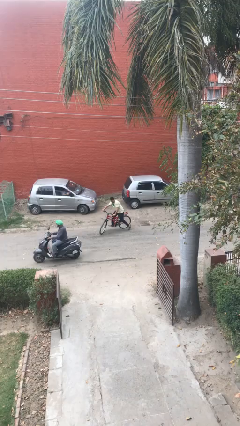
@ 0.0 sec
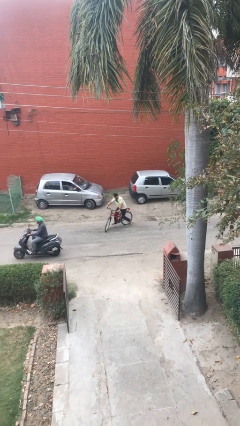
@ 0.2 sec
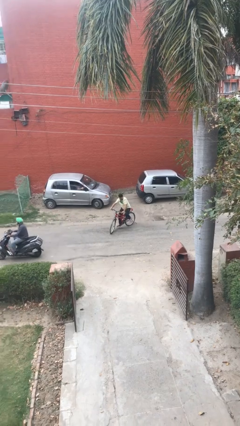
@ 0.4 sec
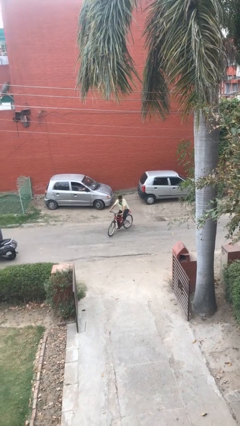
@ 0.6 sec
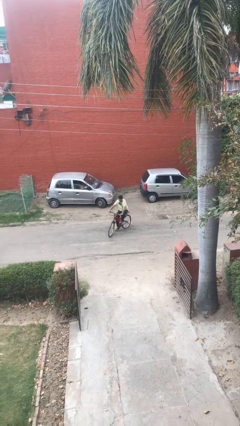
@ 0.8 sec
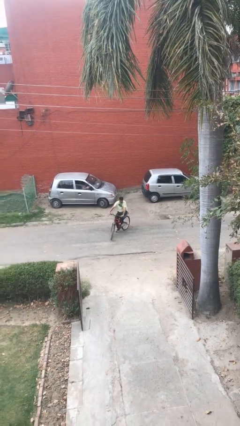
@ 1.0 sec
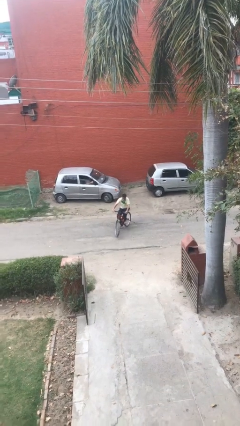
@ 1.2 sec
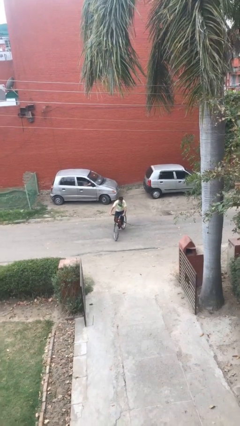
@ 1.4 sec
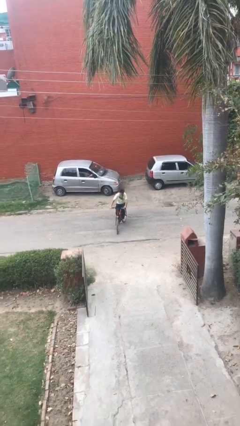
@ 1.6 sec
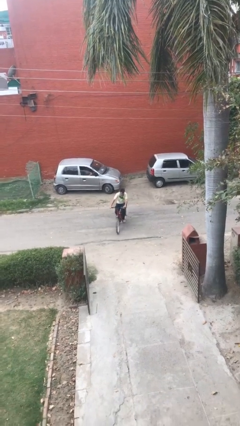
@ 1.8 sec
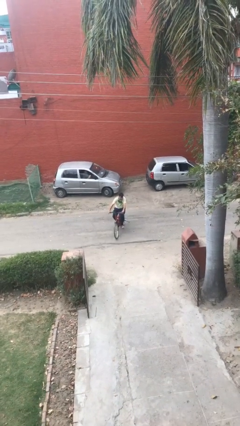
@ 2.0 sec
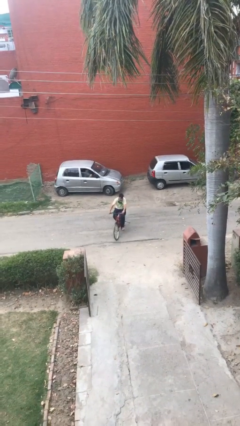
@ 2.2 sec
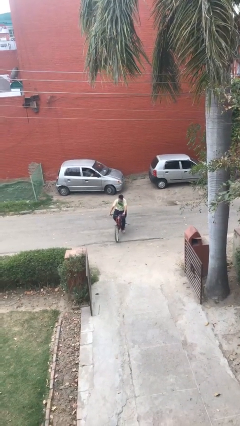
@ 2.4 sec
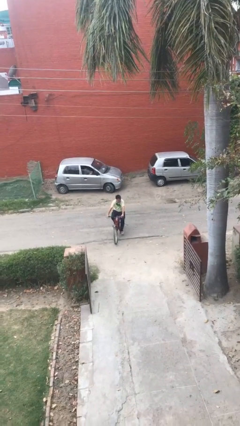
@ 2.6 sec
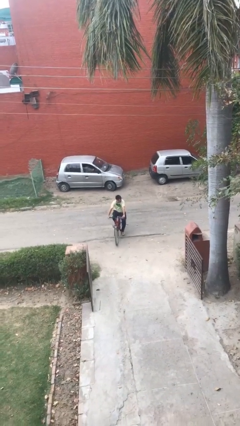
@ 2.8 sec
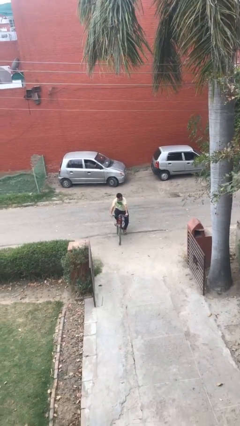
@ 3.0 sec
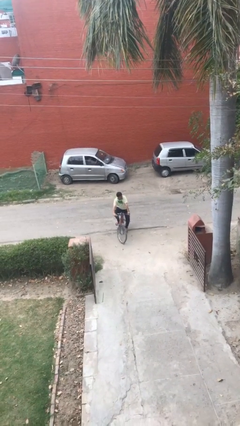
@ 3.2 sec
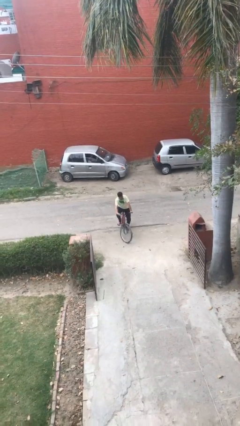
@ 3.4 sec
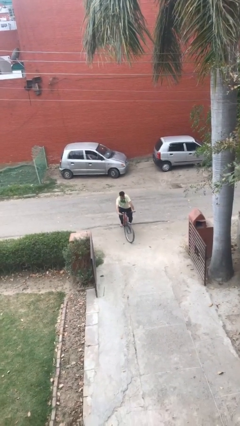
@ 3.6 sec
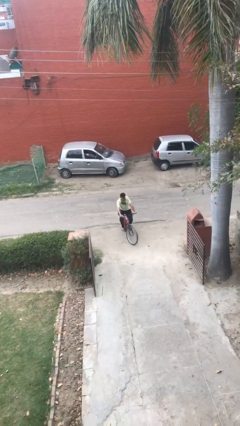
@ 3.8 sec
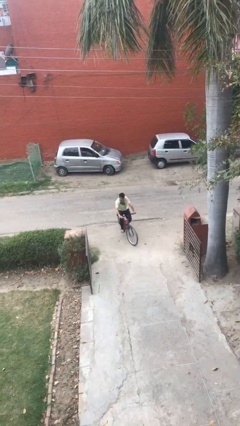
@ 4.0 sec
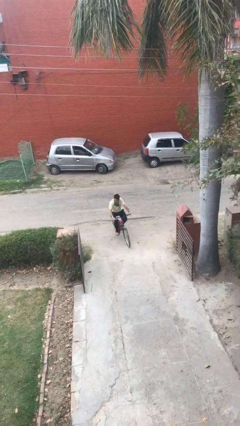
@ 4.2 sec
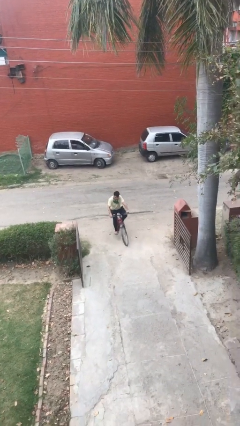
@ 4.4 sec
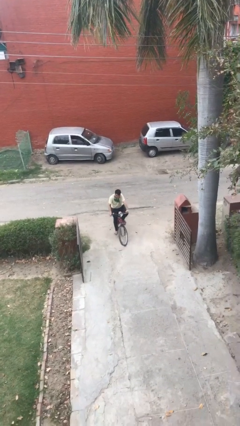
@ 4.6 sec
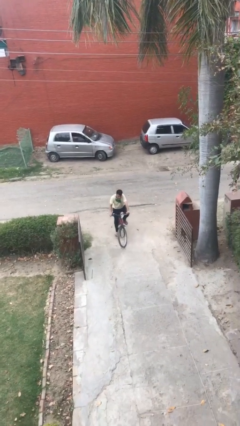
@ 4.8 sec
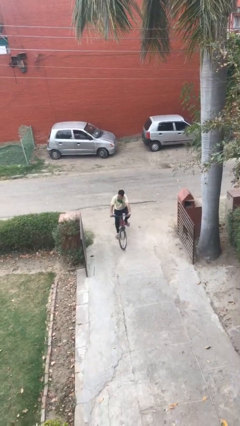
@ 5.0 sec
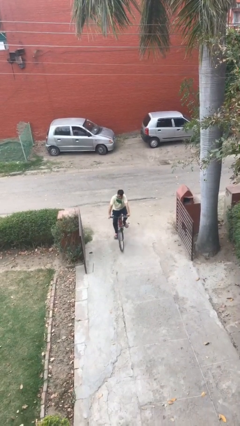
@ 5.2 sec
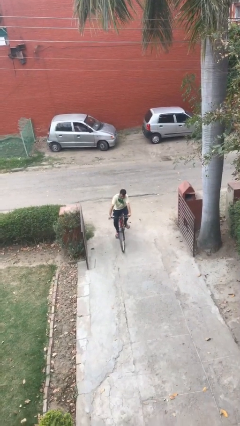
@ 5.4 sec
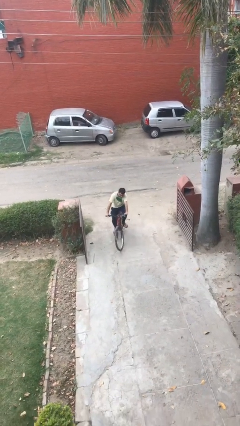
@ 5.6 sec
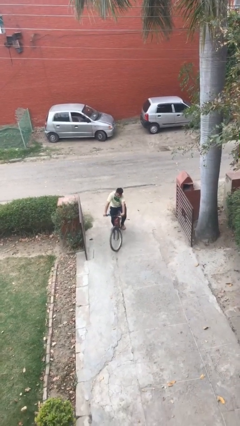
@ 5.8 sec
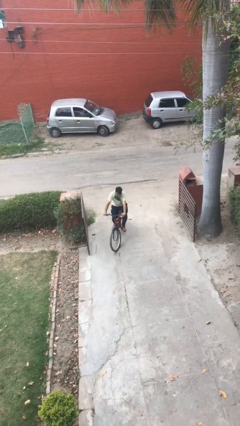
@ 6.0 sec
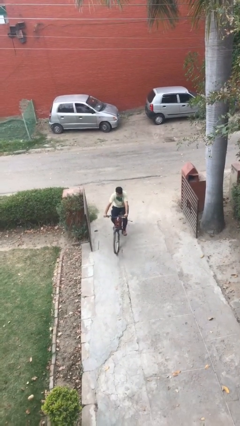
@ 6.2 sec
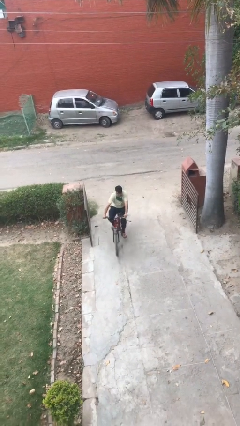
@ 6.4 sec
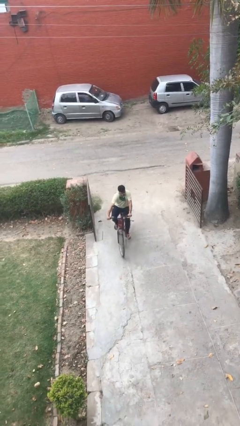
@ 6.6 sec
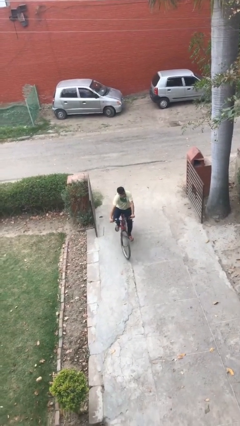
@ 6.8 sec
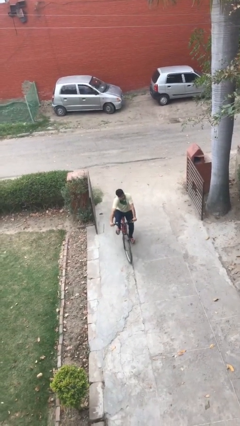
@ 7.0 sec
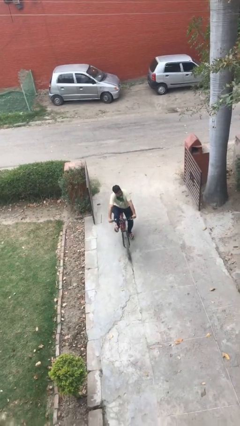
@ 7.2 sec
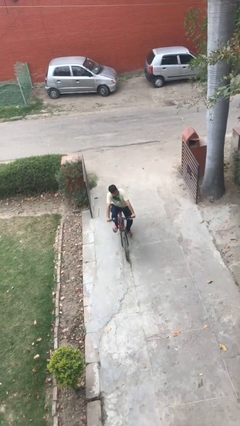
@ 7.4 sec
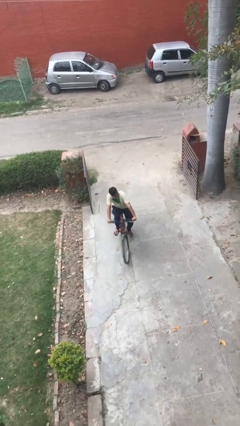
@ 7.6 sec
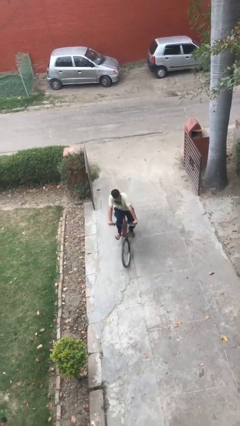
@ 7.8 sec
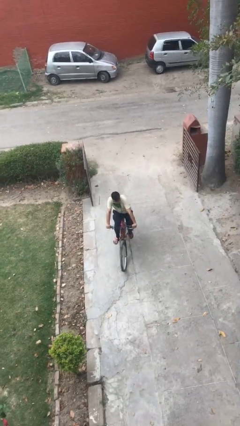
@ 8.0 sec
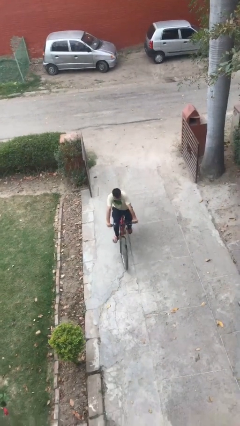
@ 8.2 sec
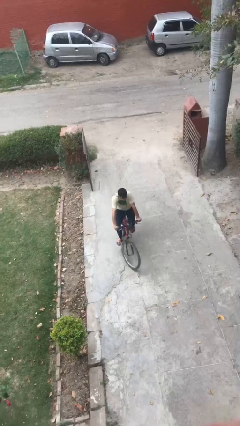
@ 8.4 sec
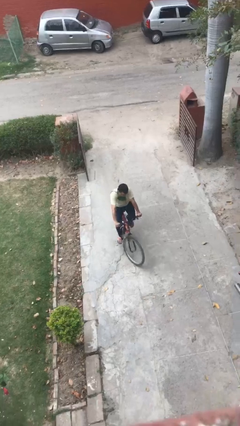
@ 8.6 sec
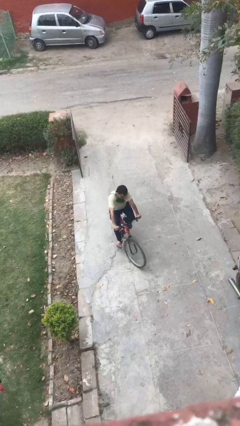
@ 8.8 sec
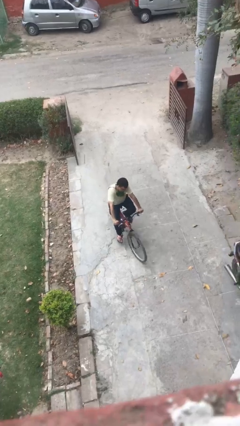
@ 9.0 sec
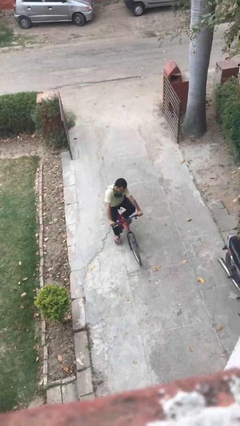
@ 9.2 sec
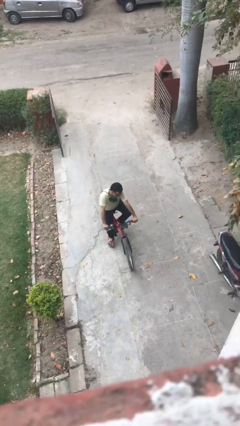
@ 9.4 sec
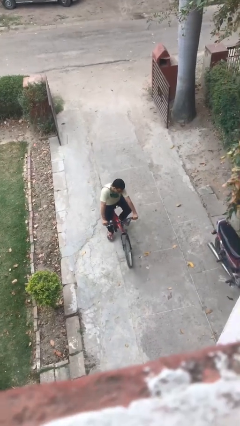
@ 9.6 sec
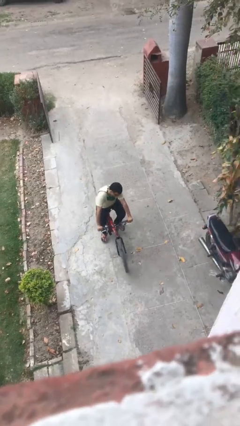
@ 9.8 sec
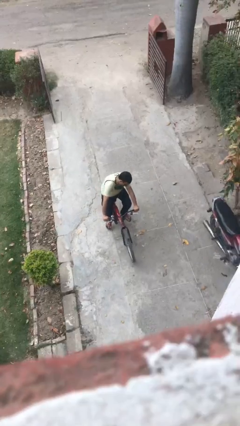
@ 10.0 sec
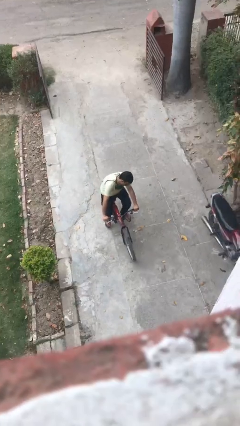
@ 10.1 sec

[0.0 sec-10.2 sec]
person rides bicycle

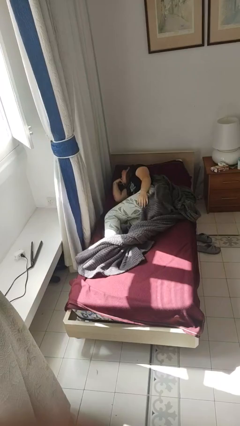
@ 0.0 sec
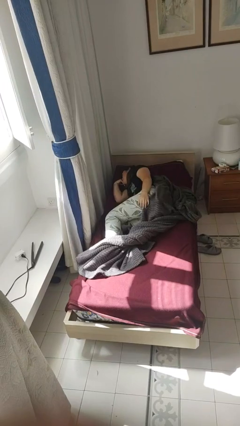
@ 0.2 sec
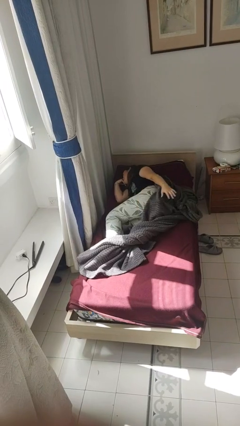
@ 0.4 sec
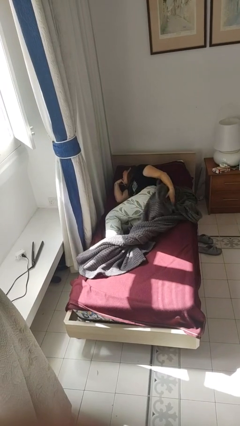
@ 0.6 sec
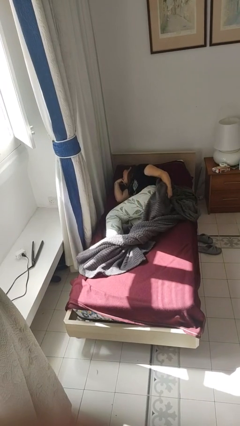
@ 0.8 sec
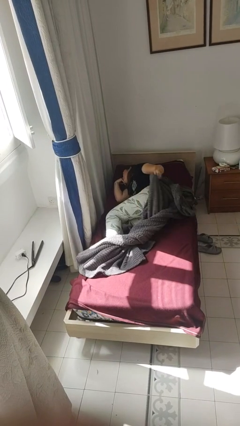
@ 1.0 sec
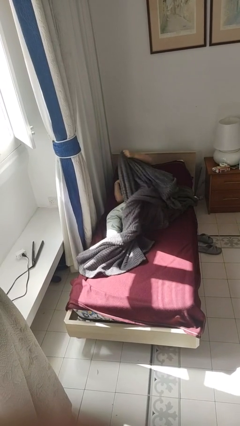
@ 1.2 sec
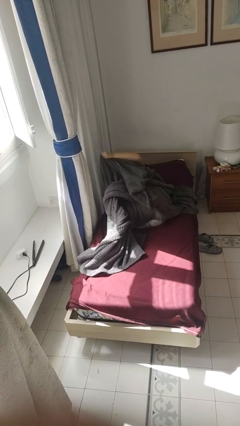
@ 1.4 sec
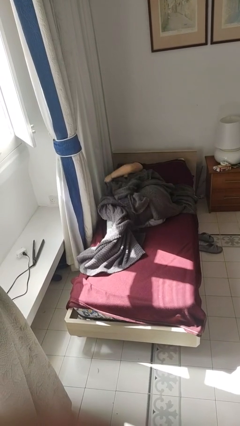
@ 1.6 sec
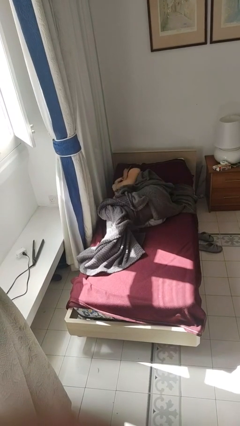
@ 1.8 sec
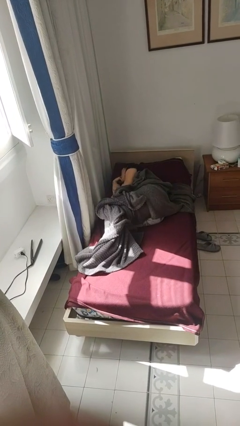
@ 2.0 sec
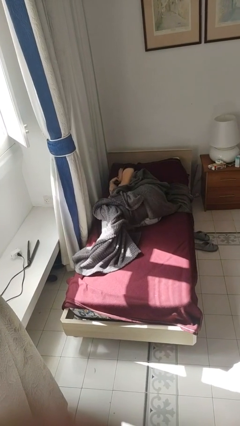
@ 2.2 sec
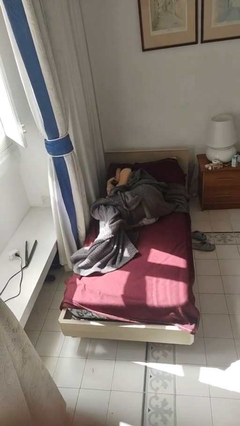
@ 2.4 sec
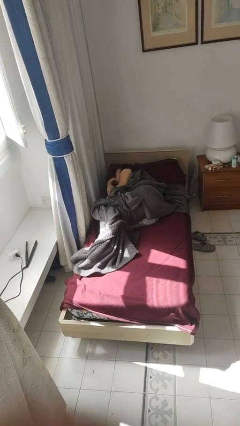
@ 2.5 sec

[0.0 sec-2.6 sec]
person covers with bedsheets

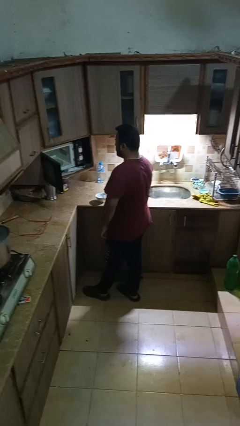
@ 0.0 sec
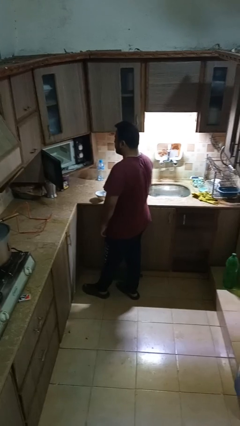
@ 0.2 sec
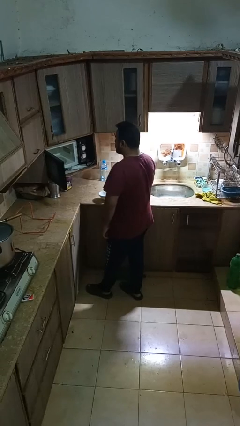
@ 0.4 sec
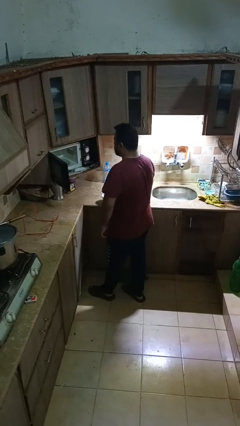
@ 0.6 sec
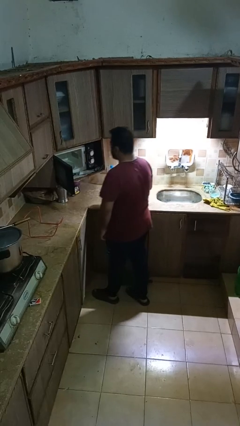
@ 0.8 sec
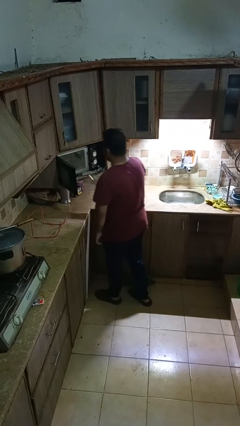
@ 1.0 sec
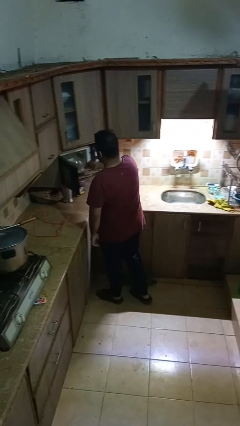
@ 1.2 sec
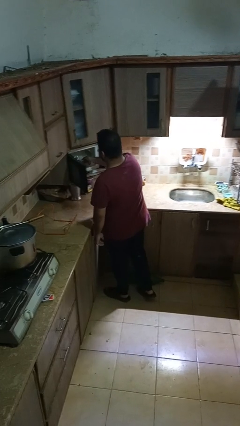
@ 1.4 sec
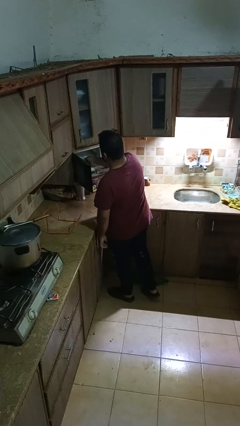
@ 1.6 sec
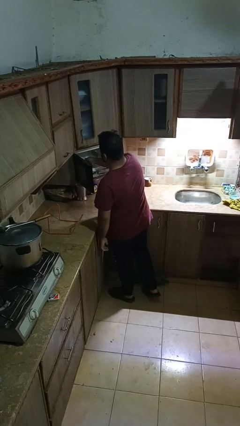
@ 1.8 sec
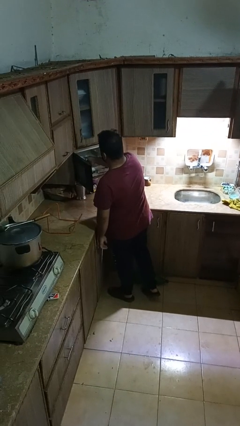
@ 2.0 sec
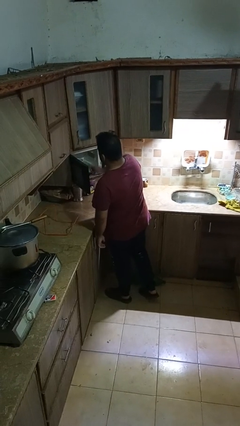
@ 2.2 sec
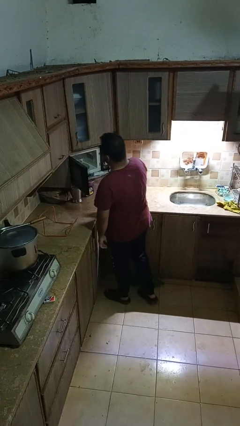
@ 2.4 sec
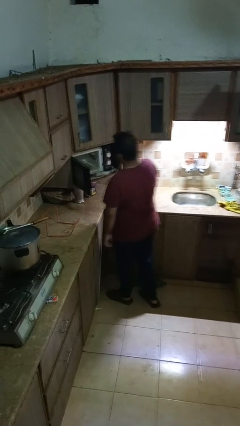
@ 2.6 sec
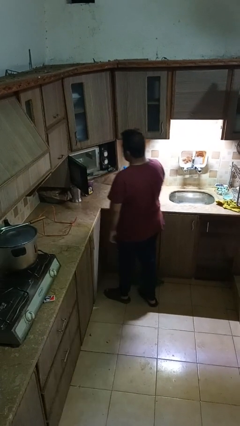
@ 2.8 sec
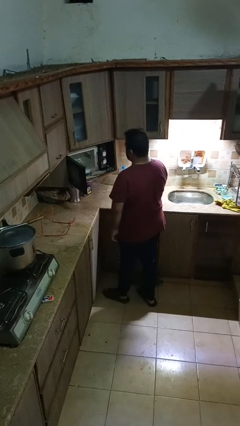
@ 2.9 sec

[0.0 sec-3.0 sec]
person puts object into microwave

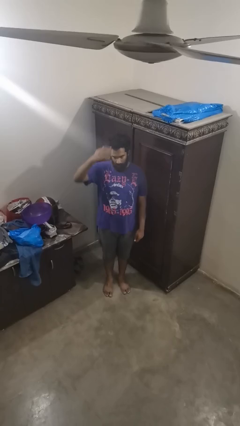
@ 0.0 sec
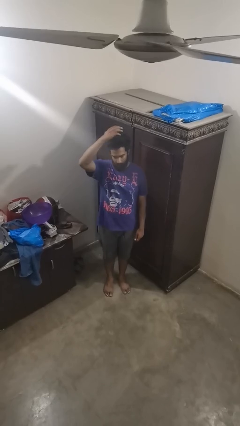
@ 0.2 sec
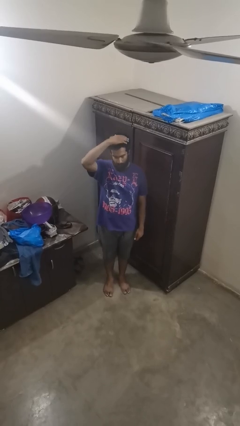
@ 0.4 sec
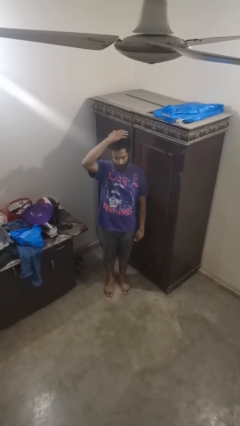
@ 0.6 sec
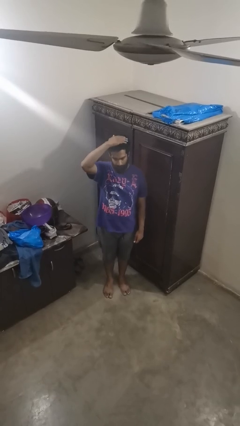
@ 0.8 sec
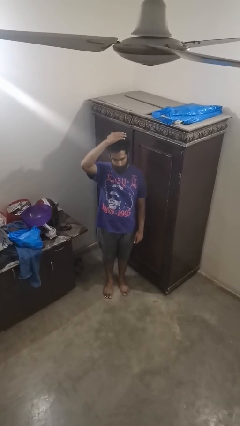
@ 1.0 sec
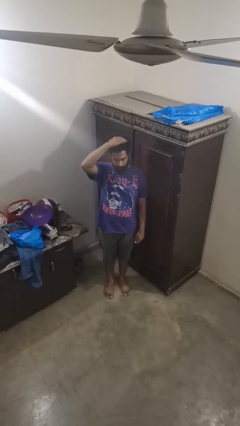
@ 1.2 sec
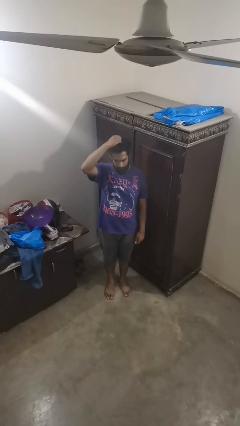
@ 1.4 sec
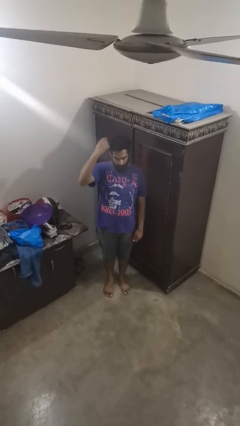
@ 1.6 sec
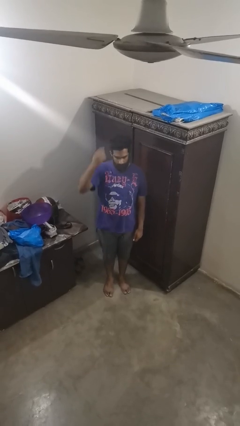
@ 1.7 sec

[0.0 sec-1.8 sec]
person pats head
